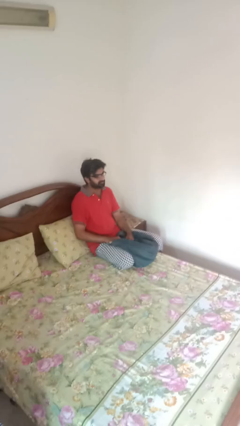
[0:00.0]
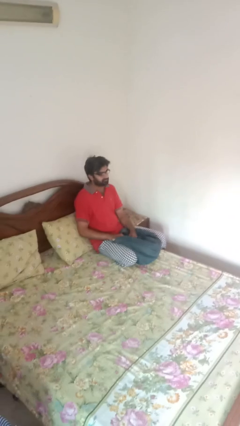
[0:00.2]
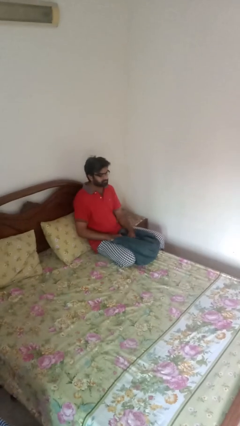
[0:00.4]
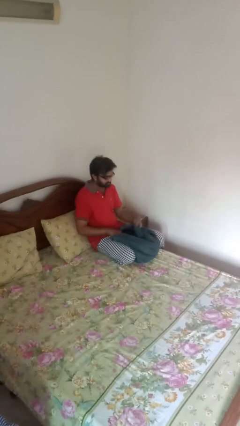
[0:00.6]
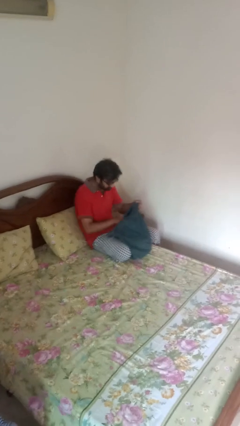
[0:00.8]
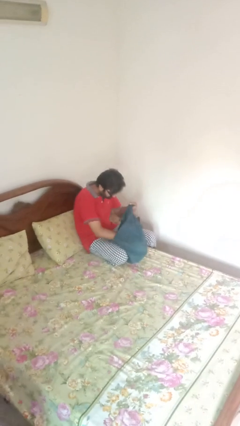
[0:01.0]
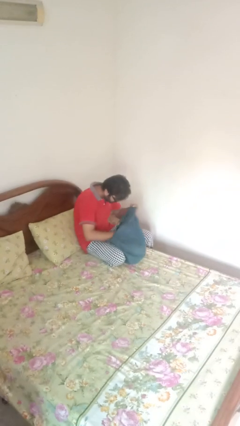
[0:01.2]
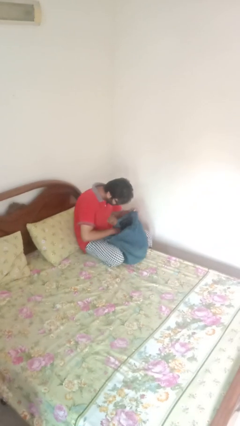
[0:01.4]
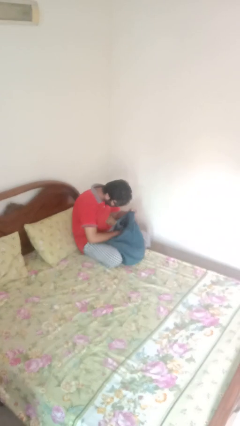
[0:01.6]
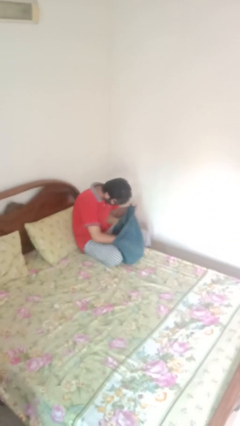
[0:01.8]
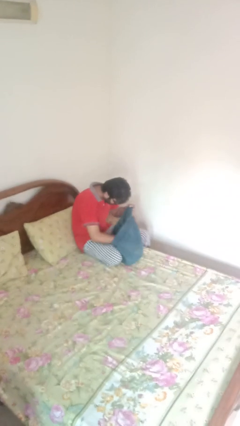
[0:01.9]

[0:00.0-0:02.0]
person searches in bag

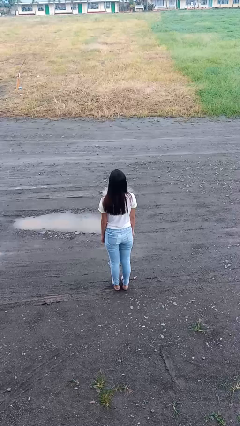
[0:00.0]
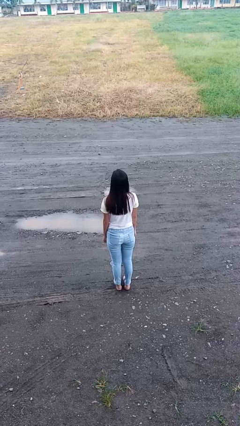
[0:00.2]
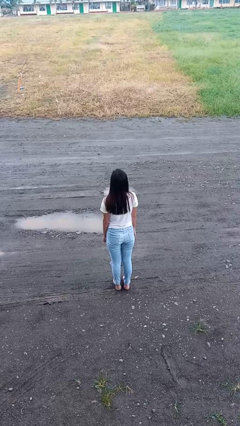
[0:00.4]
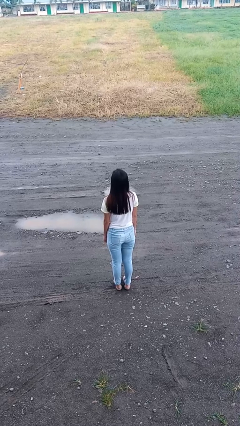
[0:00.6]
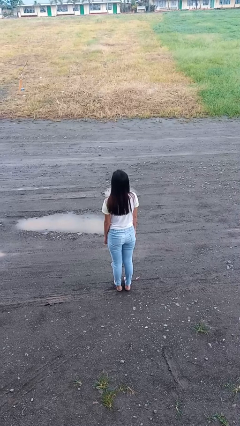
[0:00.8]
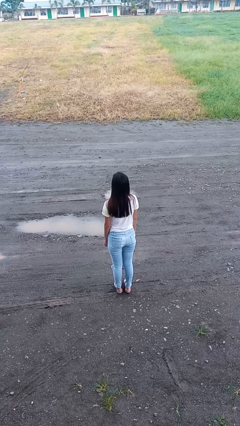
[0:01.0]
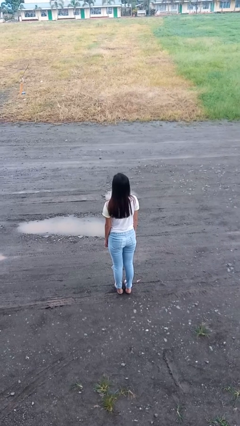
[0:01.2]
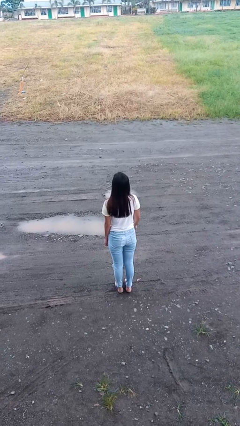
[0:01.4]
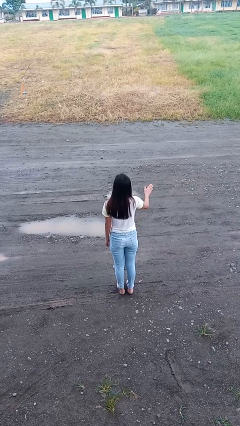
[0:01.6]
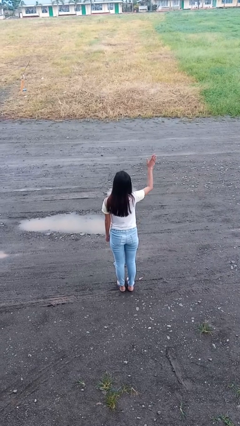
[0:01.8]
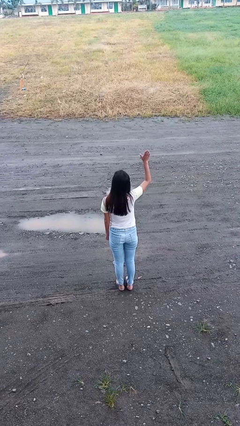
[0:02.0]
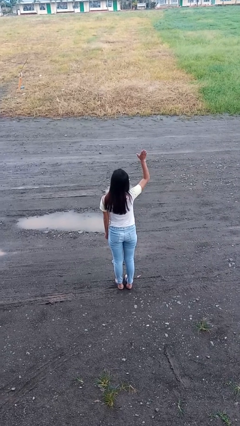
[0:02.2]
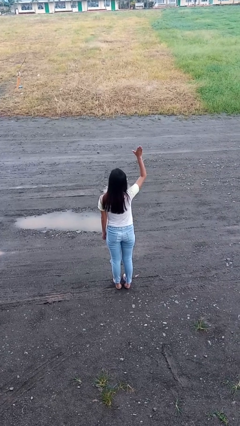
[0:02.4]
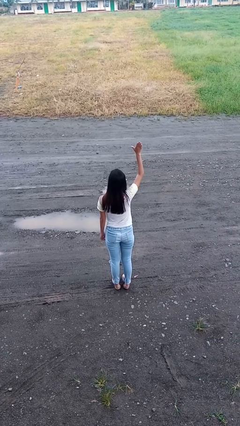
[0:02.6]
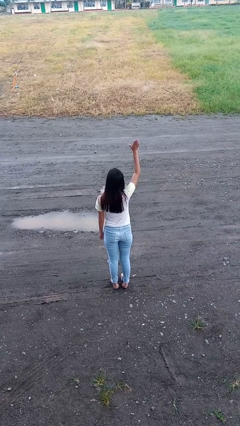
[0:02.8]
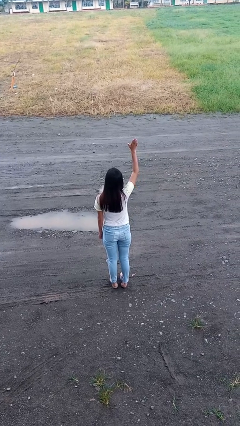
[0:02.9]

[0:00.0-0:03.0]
person gestures raise hand

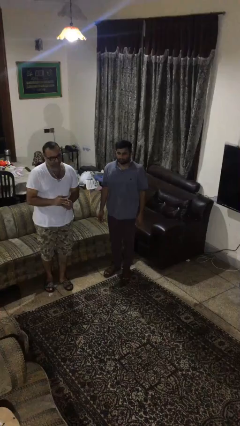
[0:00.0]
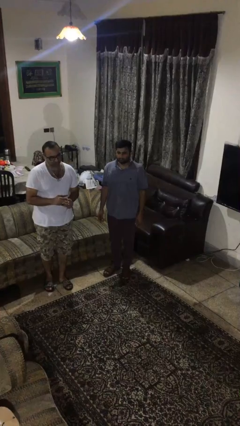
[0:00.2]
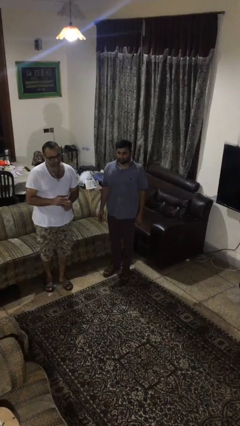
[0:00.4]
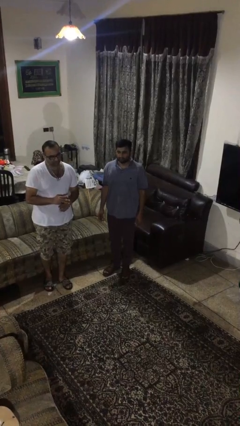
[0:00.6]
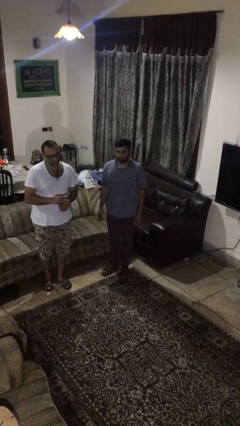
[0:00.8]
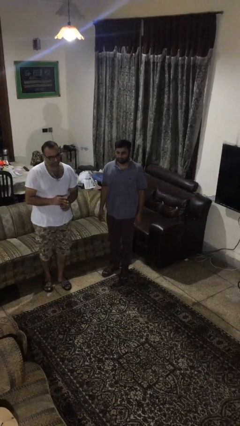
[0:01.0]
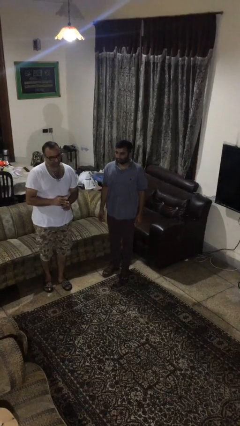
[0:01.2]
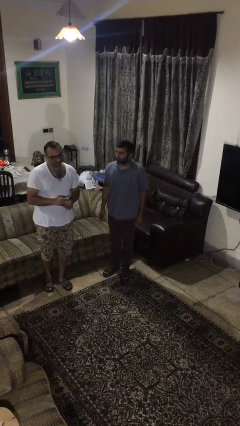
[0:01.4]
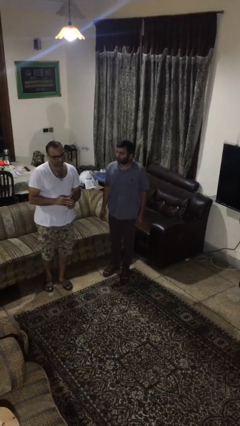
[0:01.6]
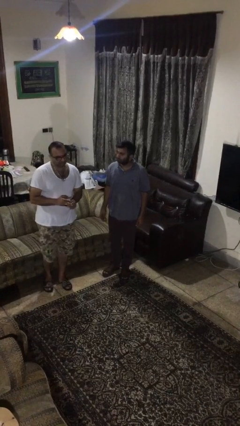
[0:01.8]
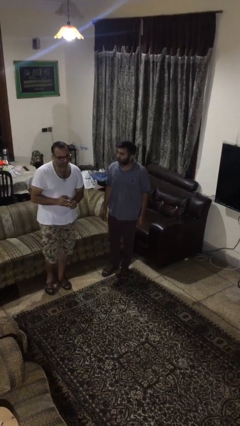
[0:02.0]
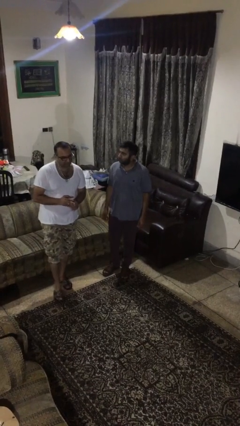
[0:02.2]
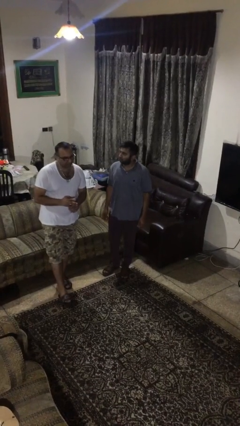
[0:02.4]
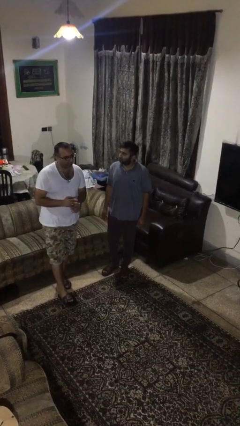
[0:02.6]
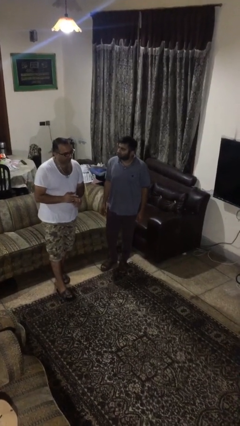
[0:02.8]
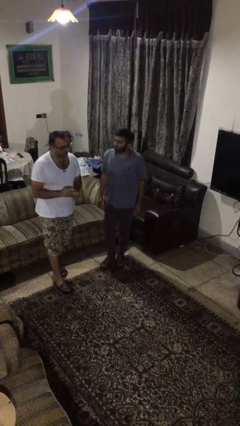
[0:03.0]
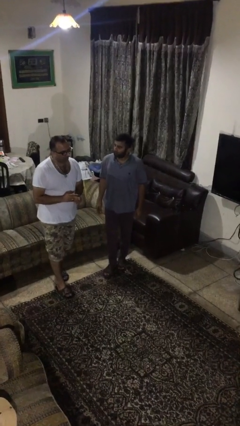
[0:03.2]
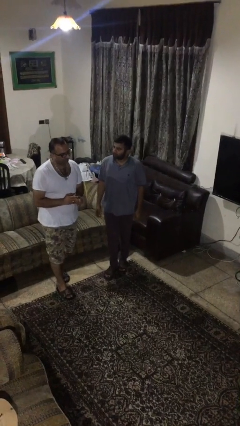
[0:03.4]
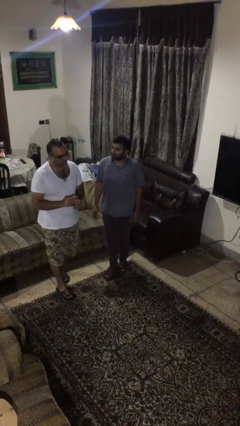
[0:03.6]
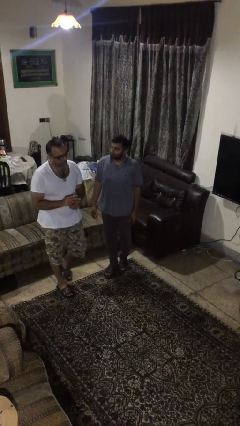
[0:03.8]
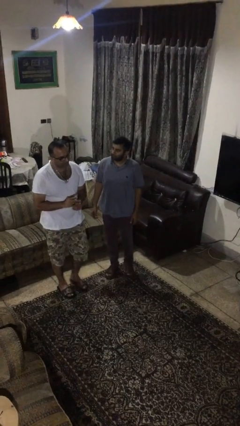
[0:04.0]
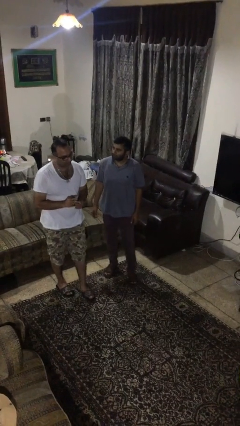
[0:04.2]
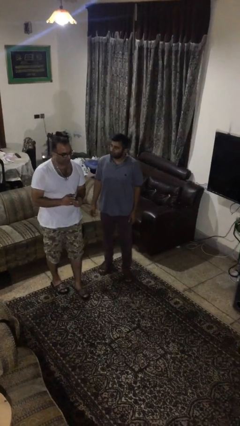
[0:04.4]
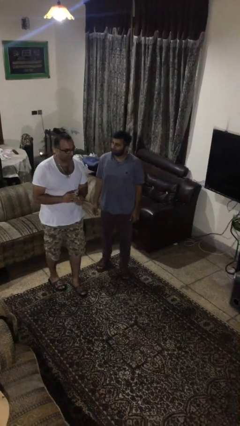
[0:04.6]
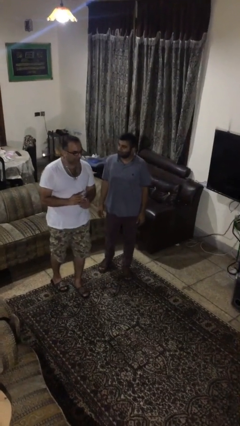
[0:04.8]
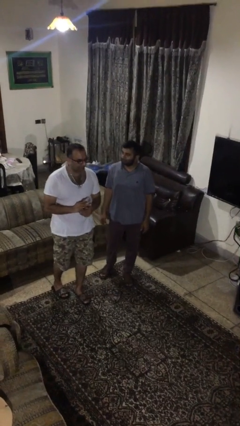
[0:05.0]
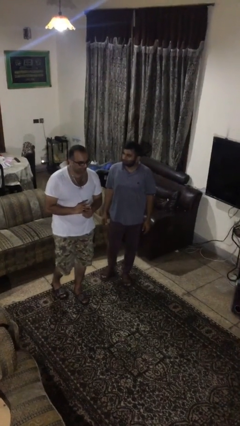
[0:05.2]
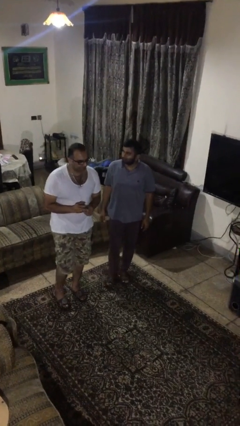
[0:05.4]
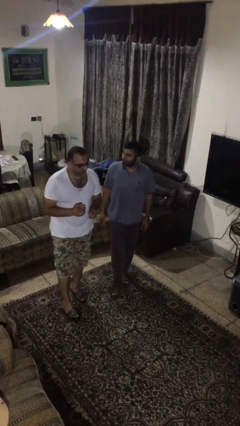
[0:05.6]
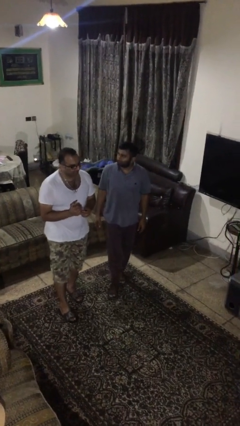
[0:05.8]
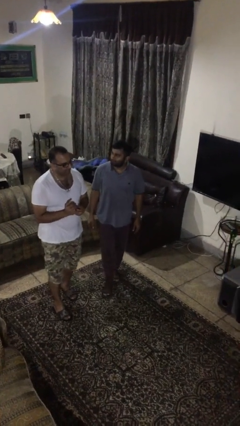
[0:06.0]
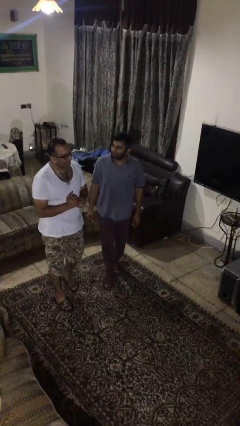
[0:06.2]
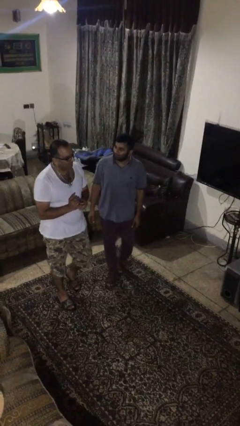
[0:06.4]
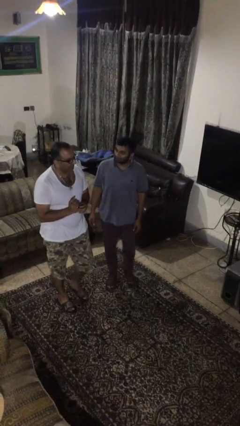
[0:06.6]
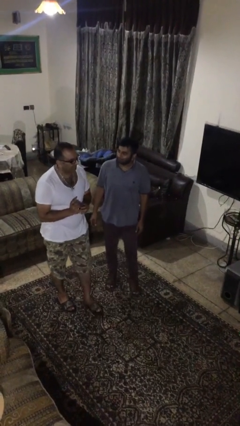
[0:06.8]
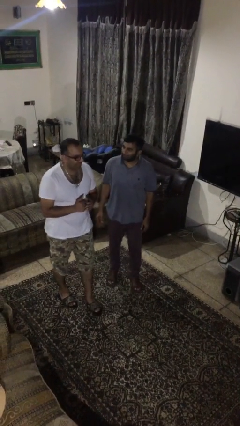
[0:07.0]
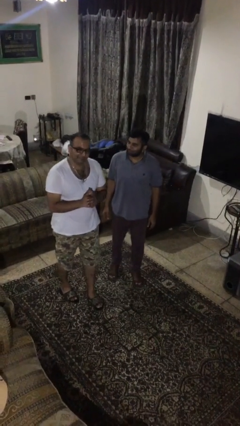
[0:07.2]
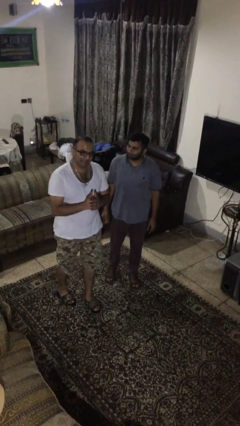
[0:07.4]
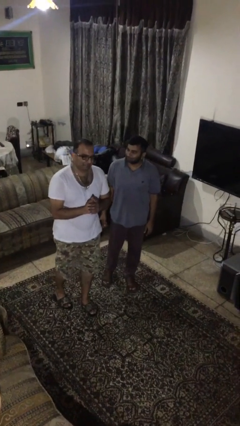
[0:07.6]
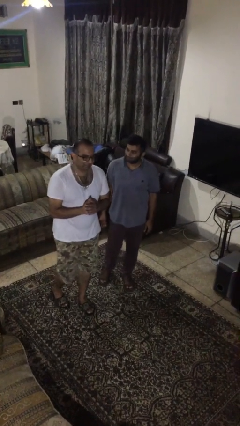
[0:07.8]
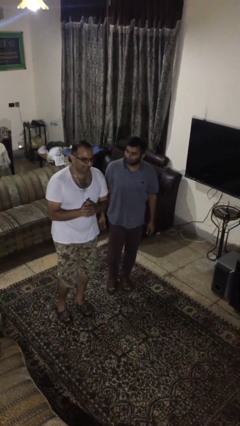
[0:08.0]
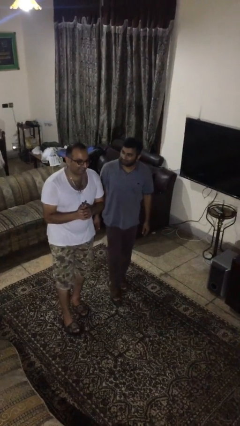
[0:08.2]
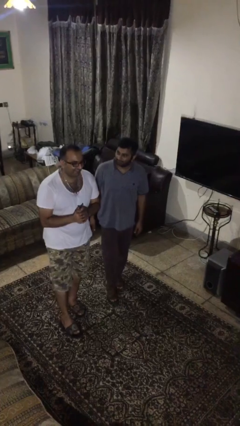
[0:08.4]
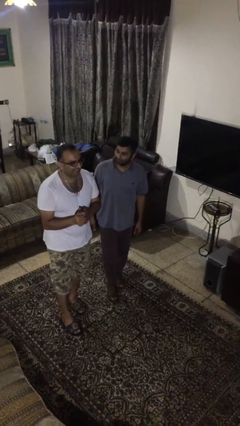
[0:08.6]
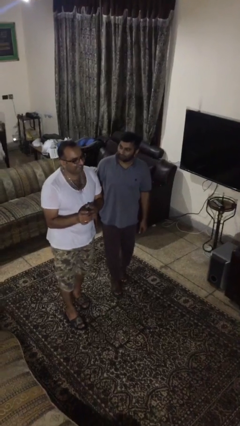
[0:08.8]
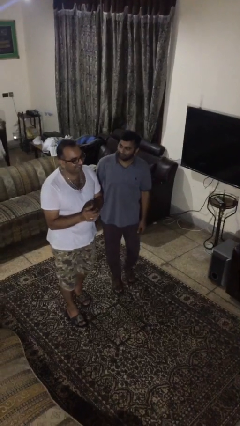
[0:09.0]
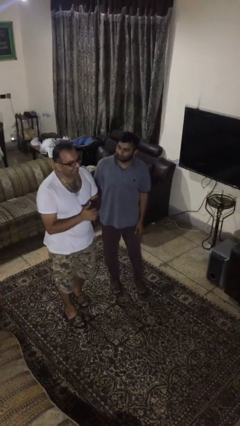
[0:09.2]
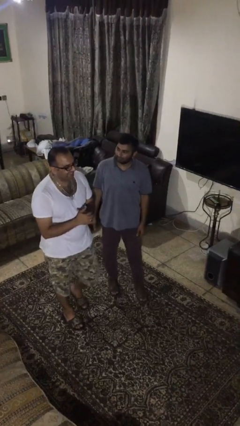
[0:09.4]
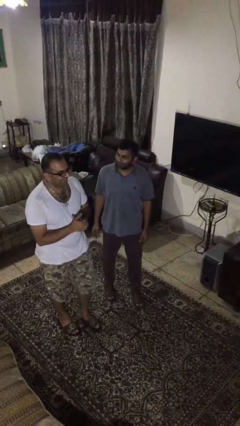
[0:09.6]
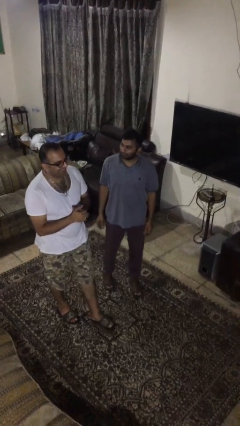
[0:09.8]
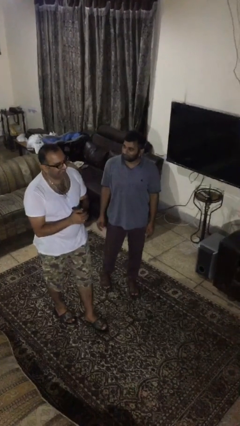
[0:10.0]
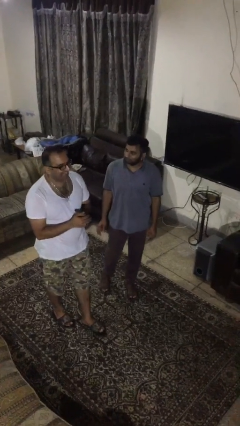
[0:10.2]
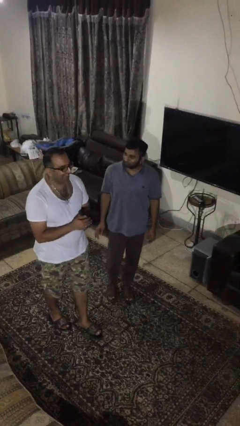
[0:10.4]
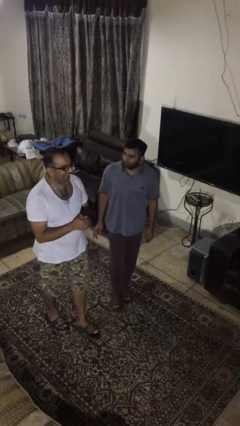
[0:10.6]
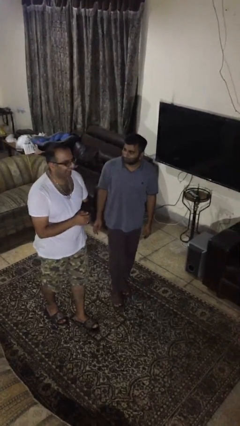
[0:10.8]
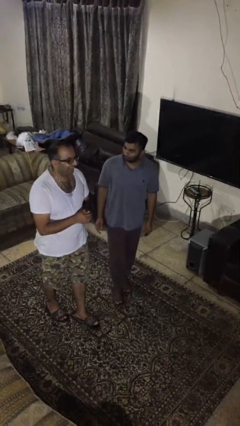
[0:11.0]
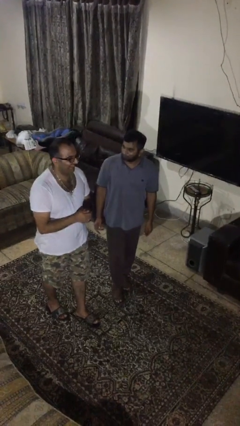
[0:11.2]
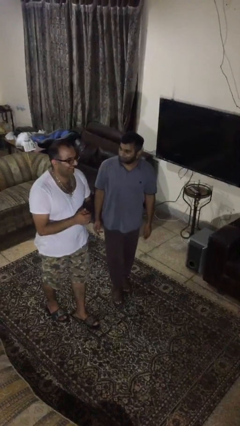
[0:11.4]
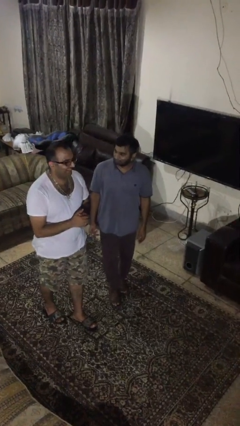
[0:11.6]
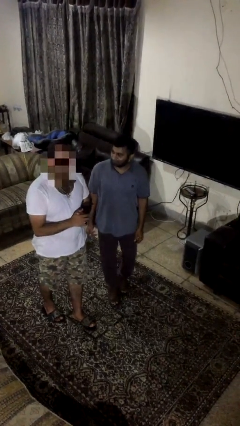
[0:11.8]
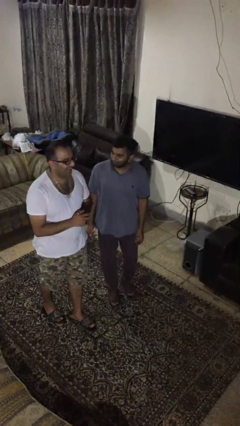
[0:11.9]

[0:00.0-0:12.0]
person talks to person

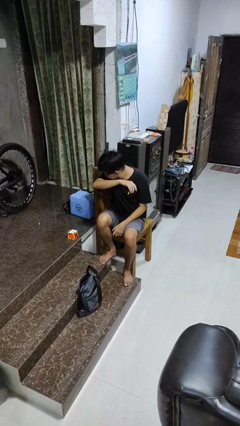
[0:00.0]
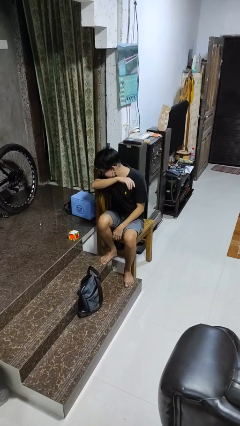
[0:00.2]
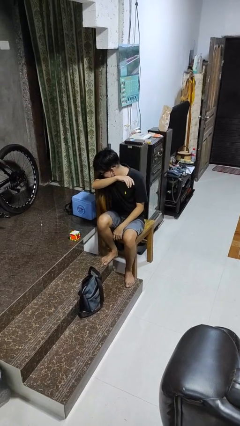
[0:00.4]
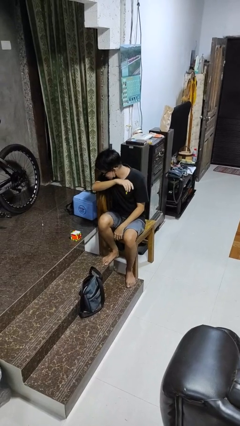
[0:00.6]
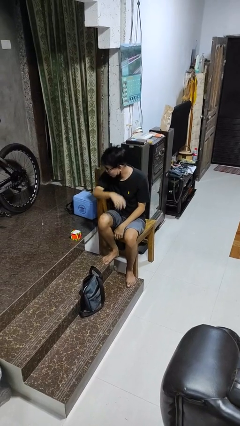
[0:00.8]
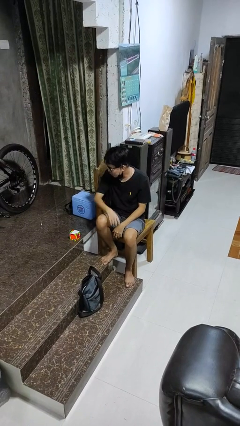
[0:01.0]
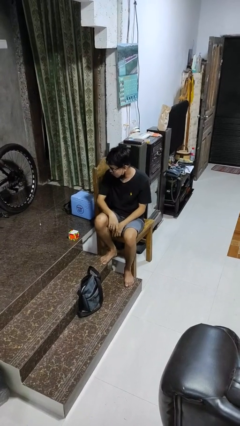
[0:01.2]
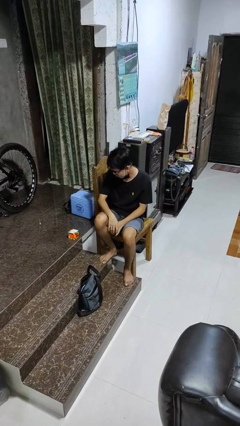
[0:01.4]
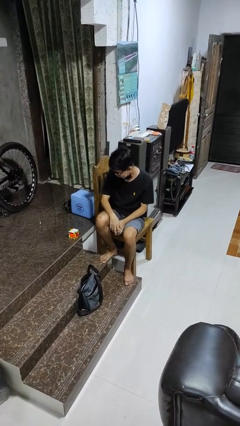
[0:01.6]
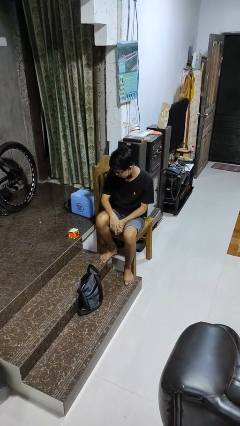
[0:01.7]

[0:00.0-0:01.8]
person sneezes into arm
